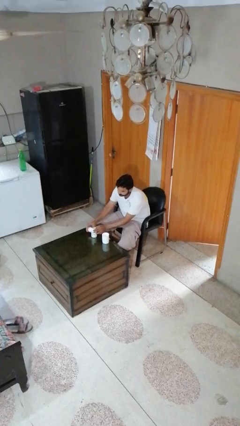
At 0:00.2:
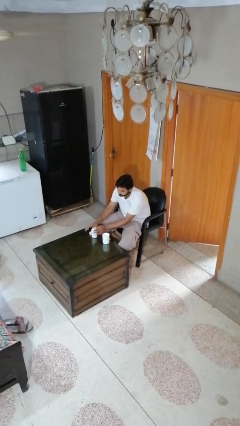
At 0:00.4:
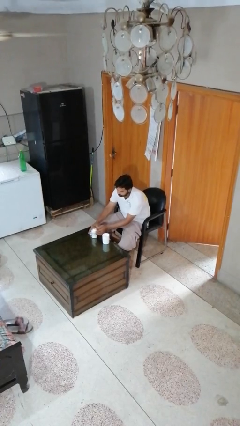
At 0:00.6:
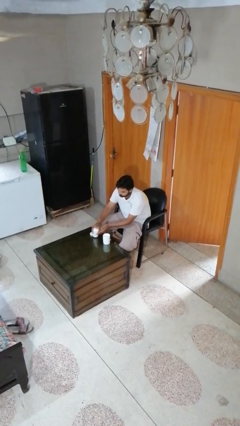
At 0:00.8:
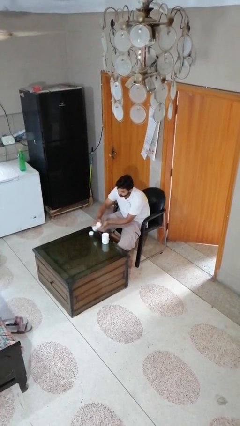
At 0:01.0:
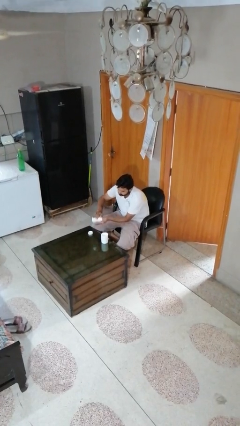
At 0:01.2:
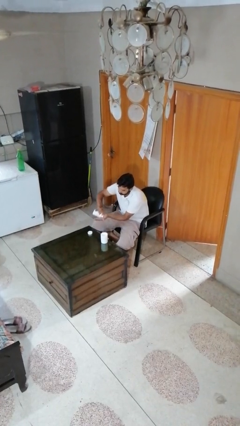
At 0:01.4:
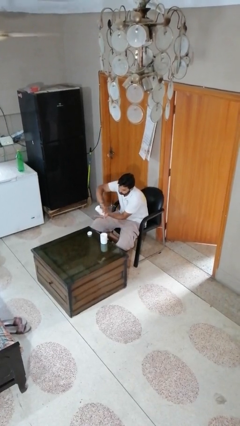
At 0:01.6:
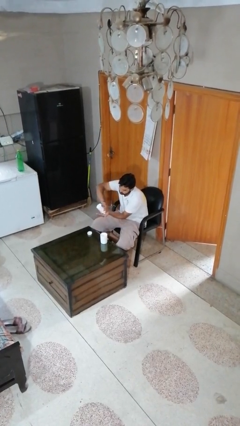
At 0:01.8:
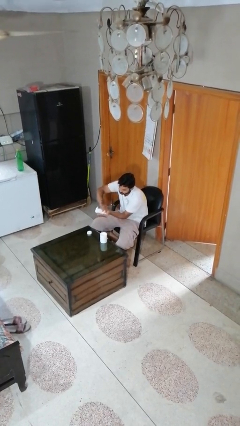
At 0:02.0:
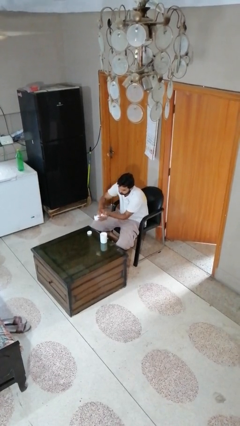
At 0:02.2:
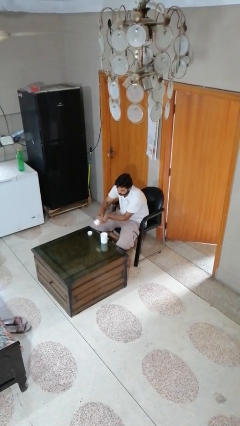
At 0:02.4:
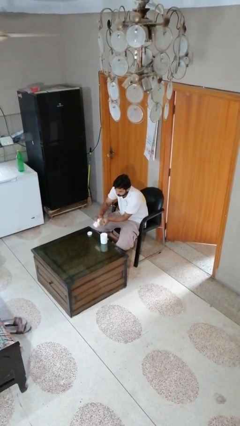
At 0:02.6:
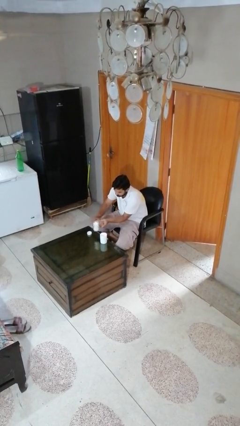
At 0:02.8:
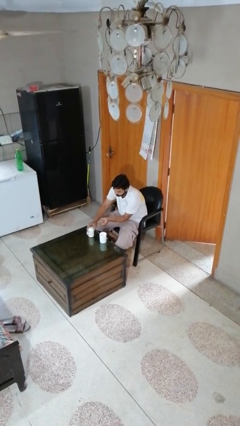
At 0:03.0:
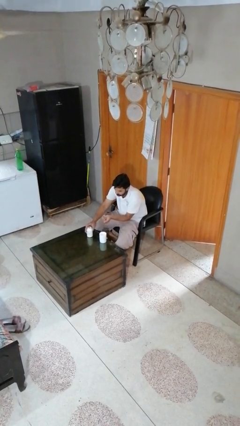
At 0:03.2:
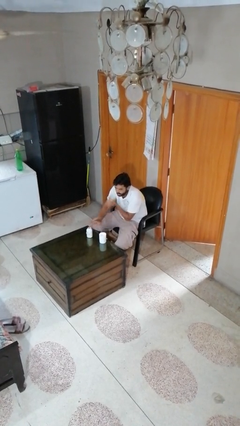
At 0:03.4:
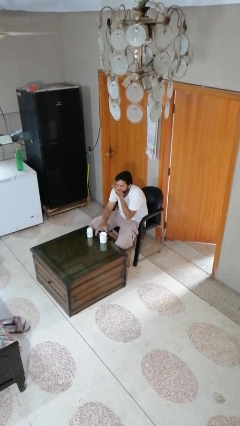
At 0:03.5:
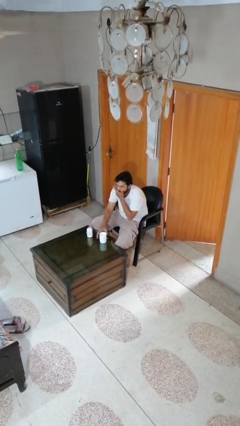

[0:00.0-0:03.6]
person takes medicine pills

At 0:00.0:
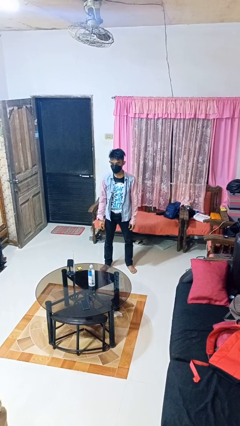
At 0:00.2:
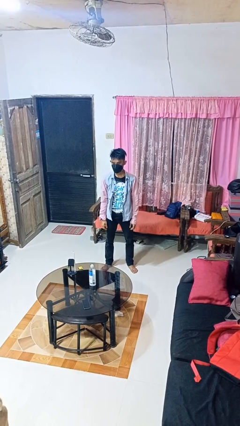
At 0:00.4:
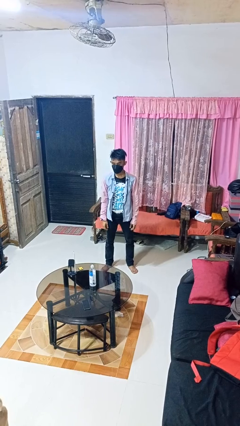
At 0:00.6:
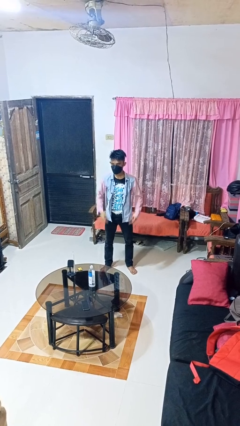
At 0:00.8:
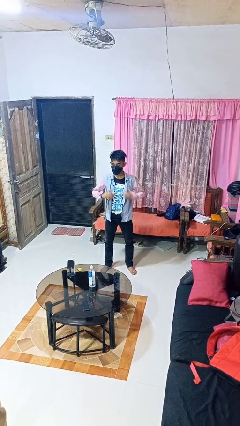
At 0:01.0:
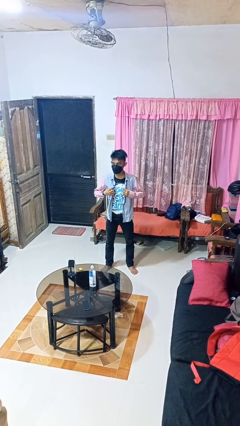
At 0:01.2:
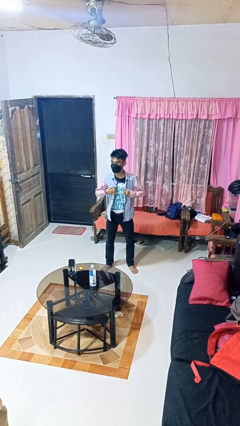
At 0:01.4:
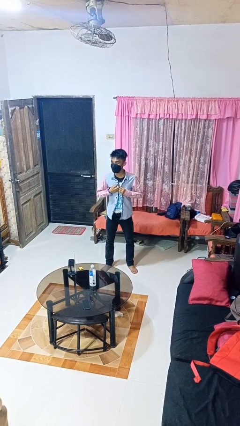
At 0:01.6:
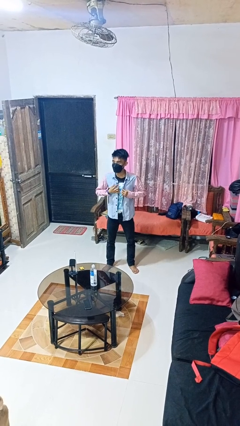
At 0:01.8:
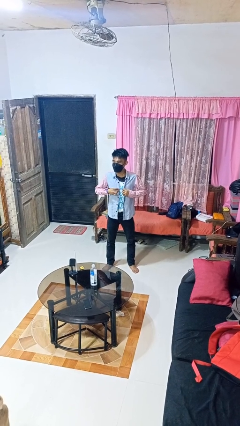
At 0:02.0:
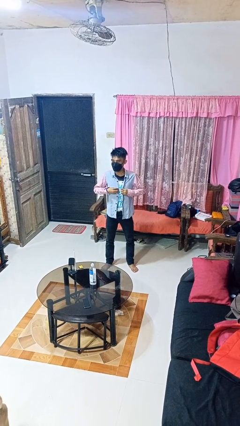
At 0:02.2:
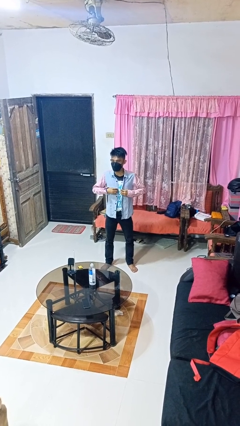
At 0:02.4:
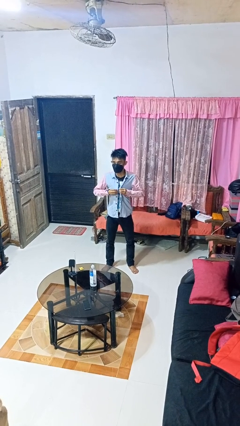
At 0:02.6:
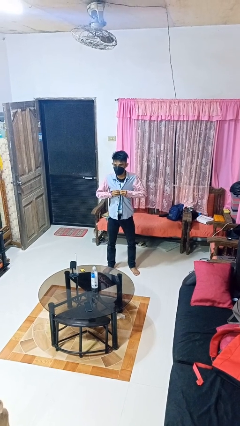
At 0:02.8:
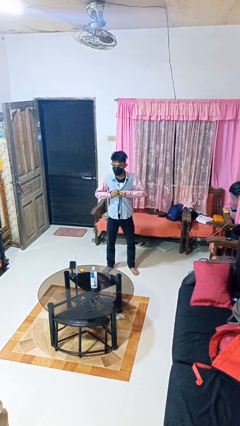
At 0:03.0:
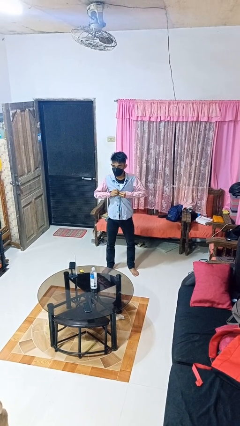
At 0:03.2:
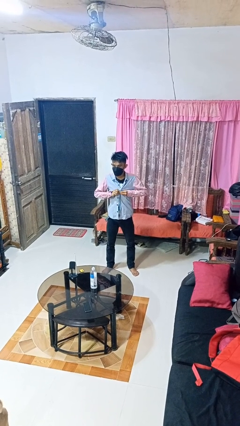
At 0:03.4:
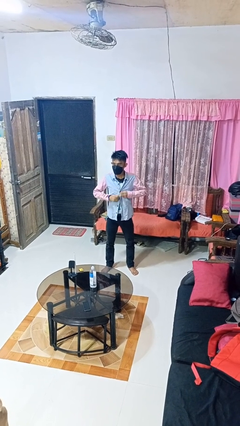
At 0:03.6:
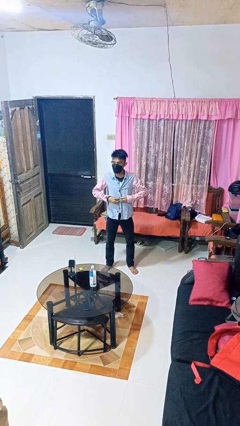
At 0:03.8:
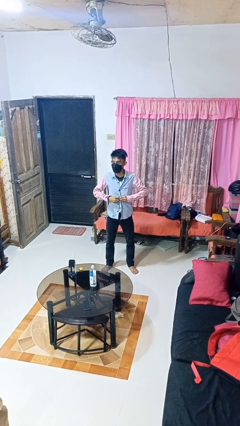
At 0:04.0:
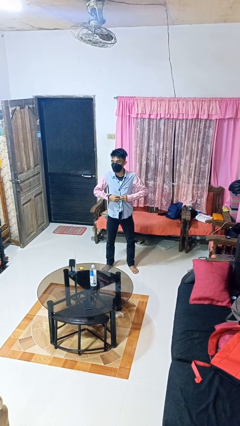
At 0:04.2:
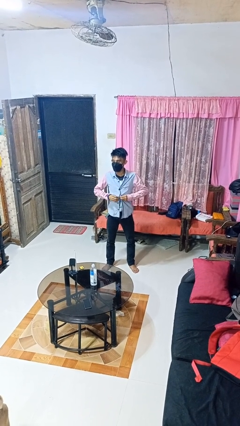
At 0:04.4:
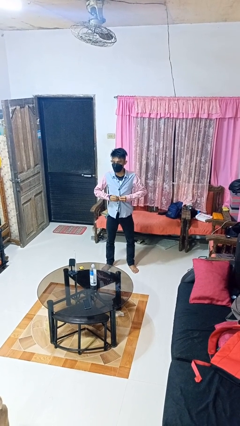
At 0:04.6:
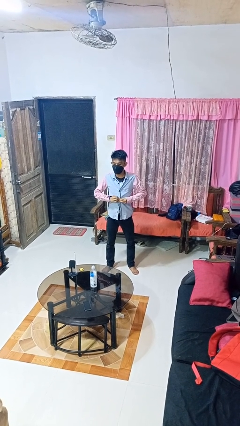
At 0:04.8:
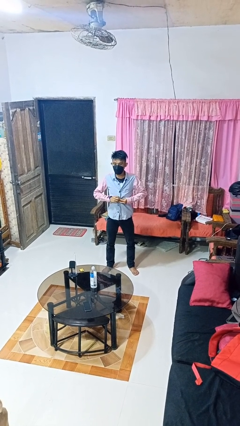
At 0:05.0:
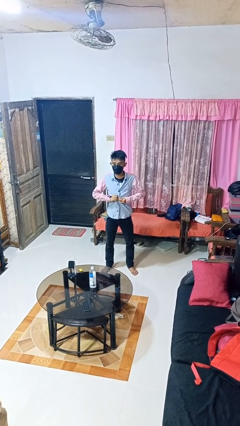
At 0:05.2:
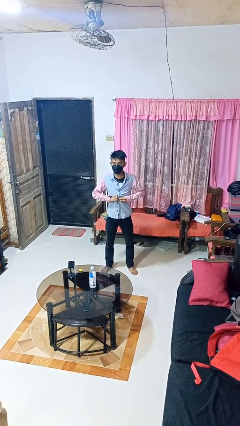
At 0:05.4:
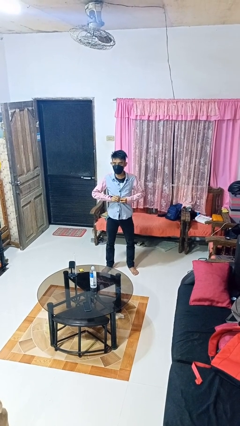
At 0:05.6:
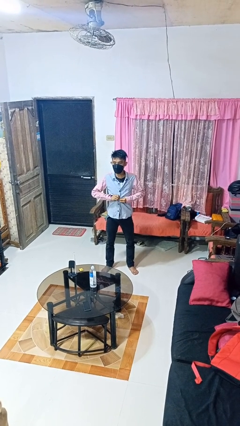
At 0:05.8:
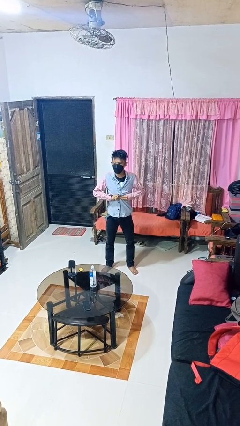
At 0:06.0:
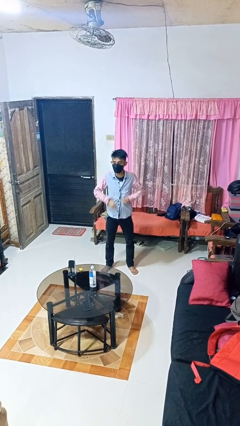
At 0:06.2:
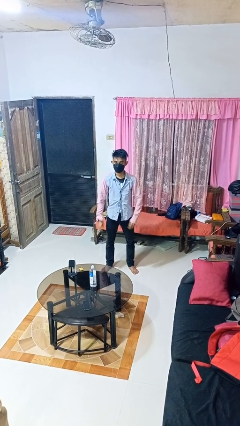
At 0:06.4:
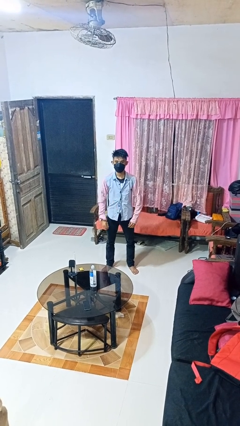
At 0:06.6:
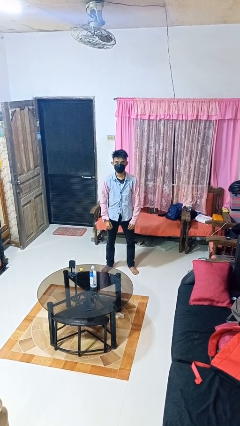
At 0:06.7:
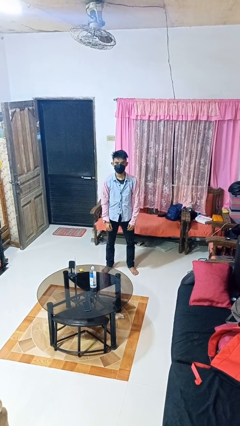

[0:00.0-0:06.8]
person buttons shirt

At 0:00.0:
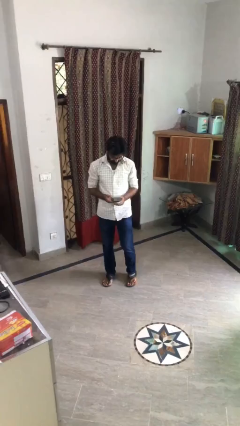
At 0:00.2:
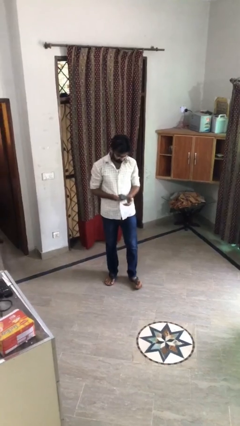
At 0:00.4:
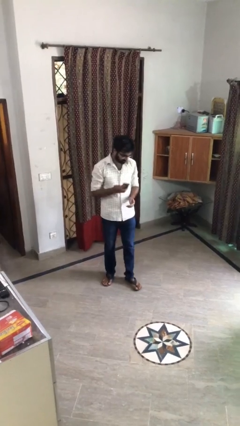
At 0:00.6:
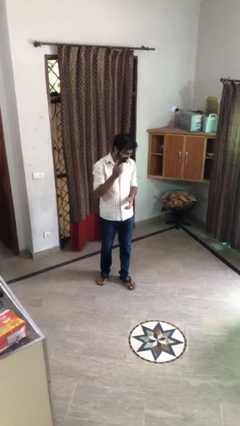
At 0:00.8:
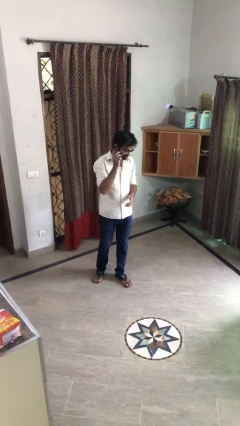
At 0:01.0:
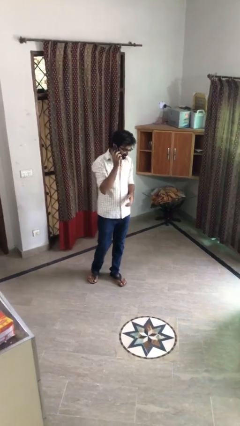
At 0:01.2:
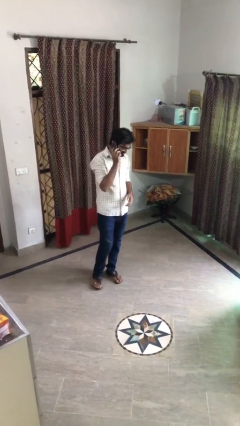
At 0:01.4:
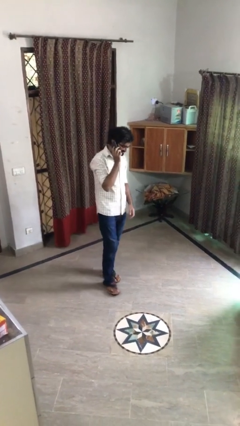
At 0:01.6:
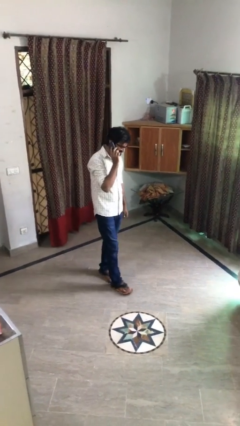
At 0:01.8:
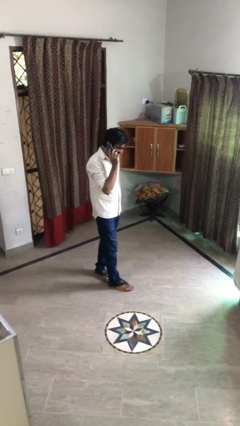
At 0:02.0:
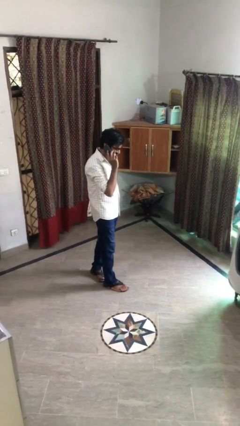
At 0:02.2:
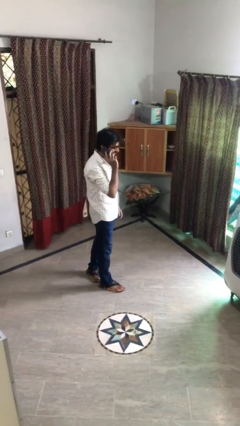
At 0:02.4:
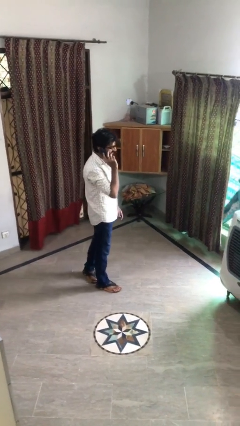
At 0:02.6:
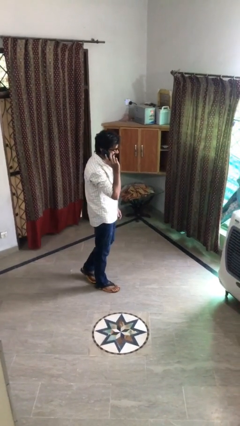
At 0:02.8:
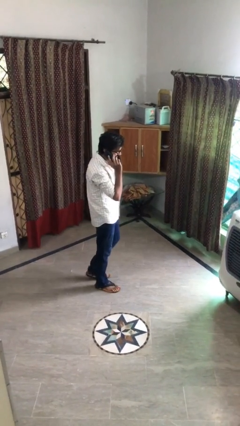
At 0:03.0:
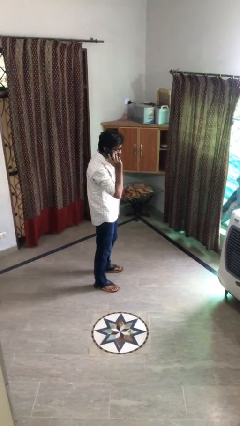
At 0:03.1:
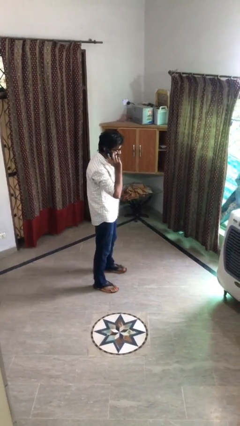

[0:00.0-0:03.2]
person talks on phone

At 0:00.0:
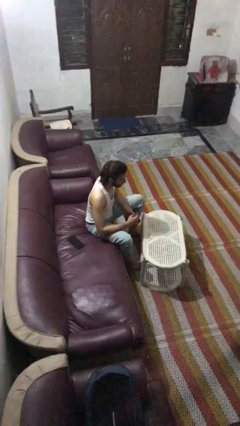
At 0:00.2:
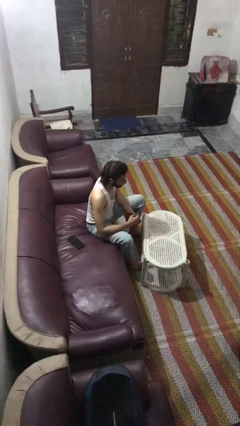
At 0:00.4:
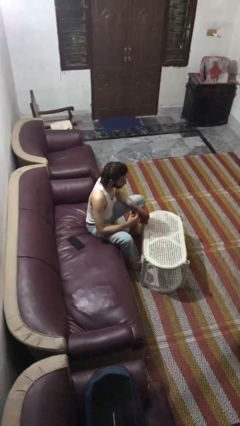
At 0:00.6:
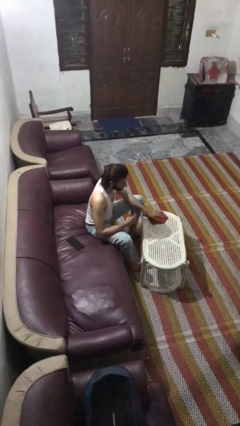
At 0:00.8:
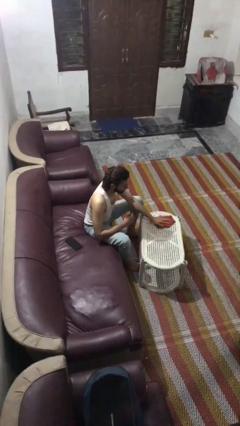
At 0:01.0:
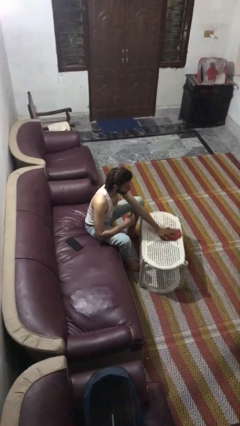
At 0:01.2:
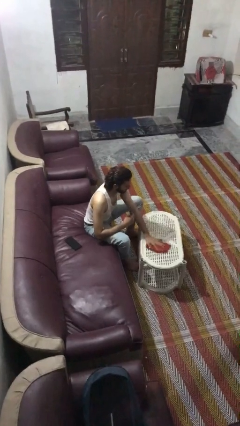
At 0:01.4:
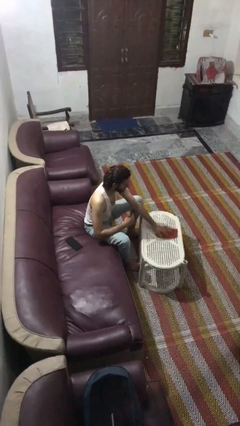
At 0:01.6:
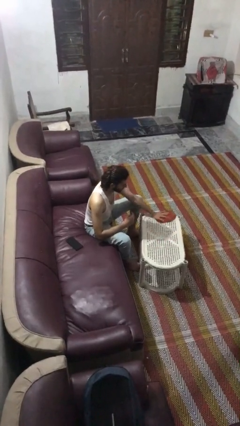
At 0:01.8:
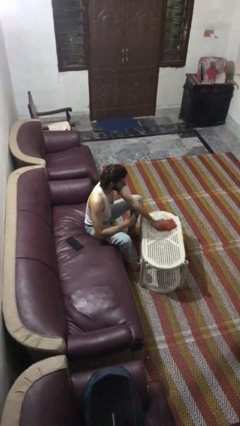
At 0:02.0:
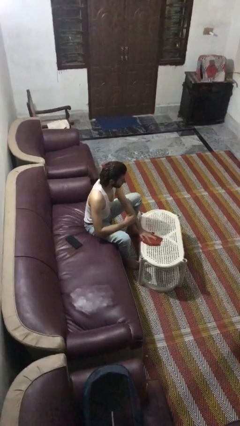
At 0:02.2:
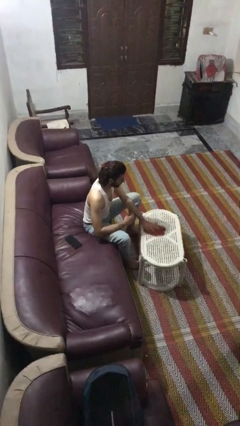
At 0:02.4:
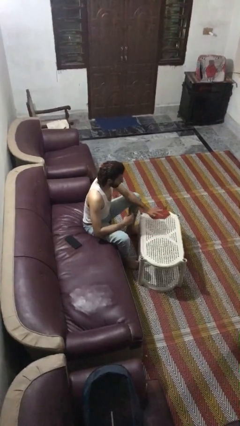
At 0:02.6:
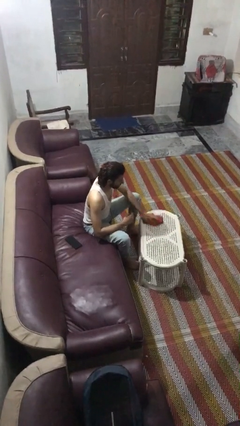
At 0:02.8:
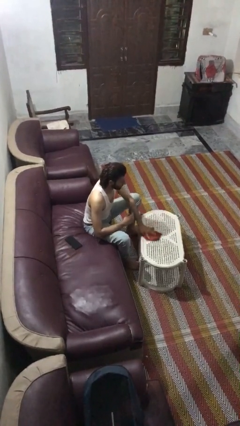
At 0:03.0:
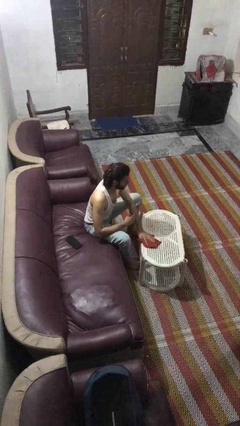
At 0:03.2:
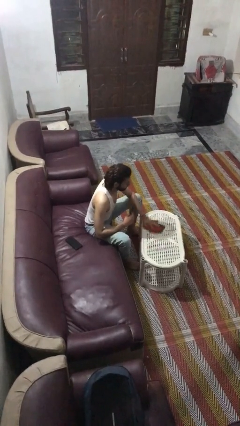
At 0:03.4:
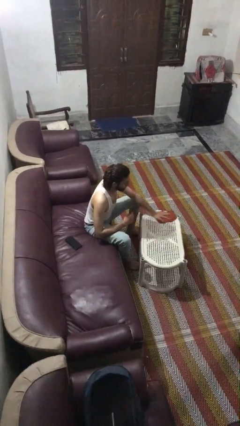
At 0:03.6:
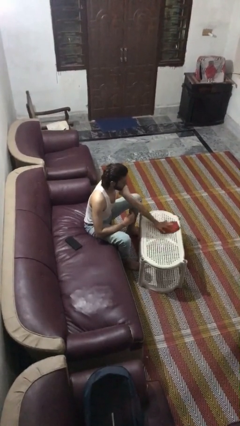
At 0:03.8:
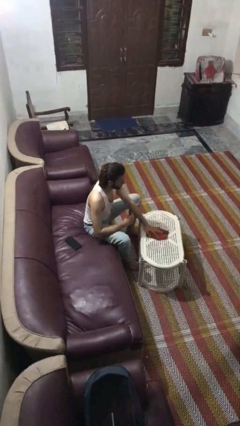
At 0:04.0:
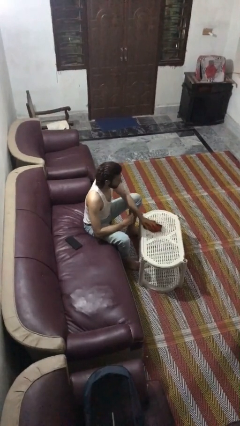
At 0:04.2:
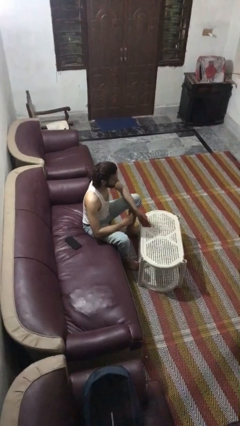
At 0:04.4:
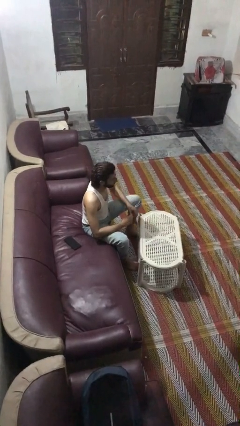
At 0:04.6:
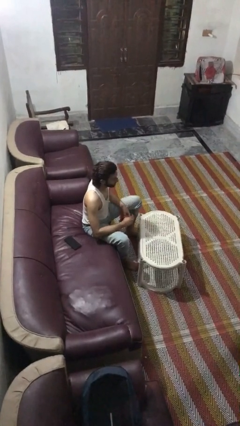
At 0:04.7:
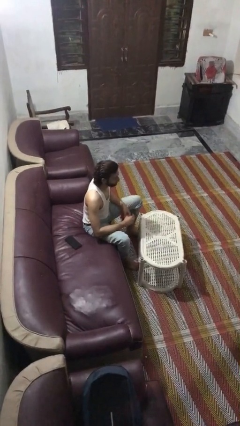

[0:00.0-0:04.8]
person cleans table with rag
